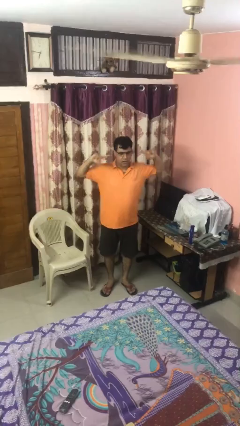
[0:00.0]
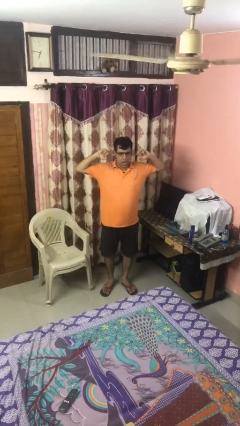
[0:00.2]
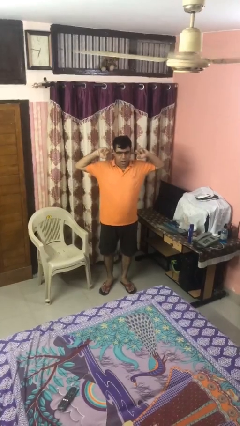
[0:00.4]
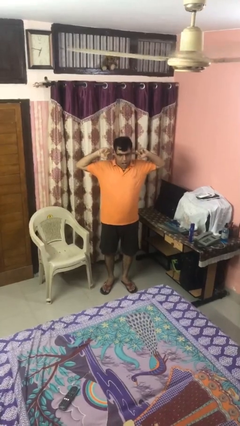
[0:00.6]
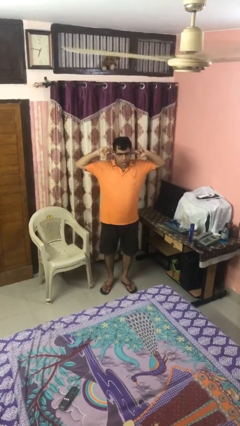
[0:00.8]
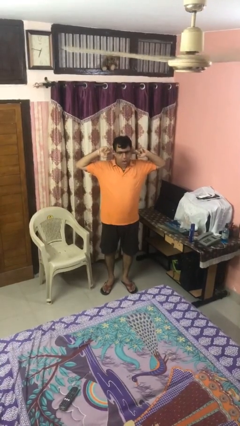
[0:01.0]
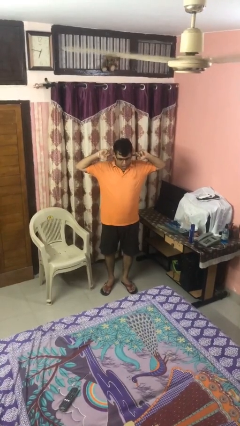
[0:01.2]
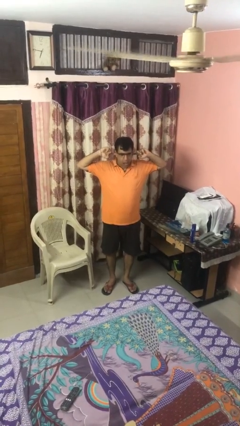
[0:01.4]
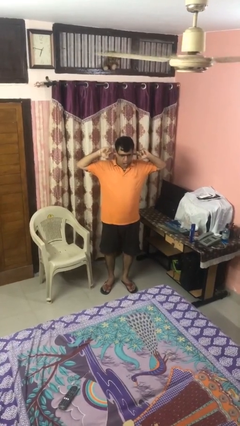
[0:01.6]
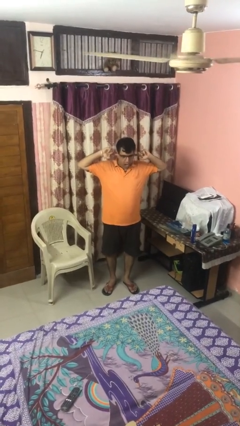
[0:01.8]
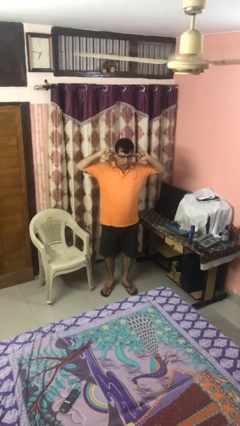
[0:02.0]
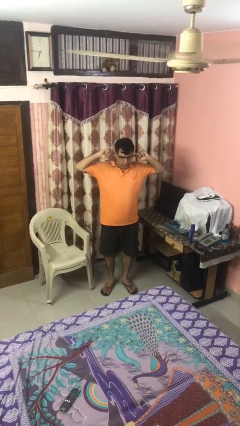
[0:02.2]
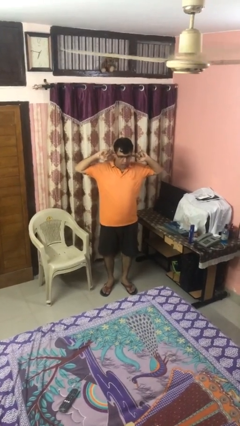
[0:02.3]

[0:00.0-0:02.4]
person puts fingers in ear

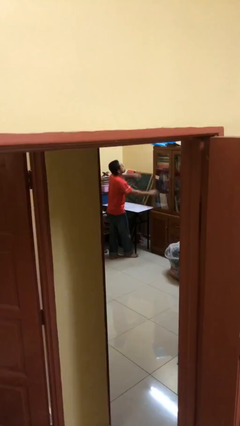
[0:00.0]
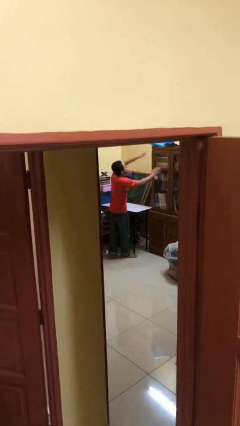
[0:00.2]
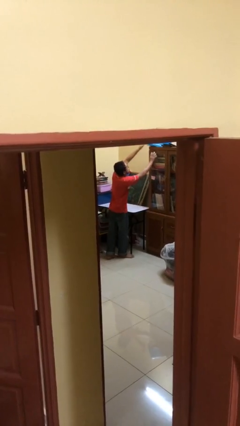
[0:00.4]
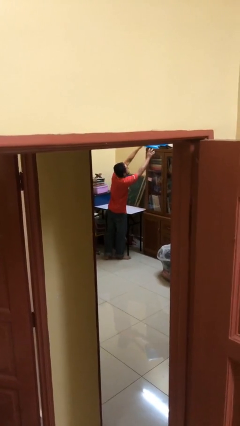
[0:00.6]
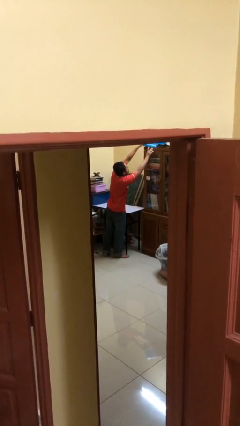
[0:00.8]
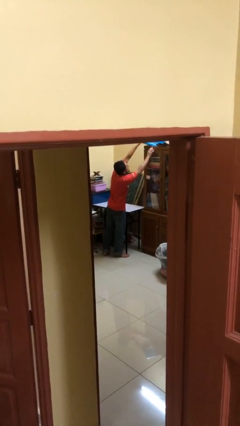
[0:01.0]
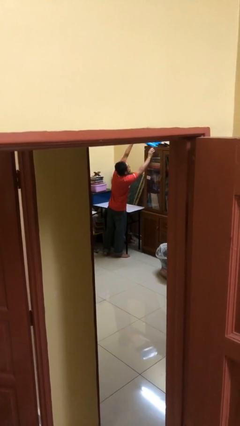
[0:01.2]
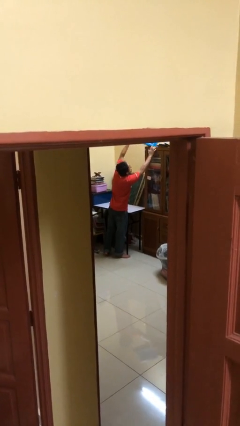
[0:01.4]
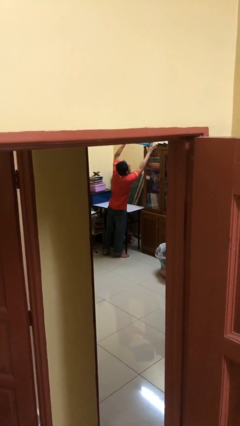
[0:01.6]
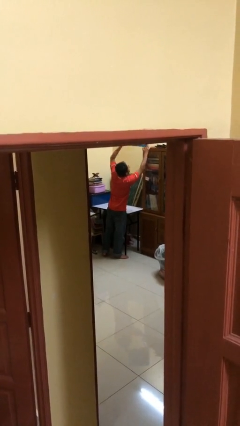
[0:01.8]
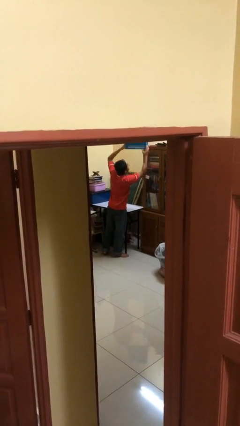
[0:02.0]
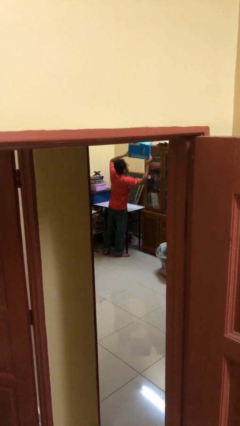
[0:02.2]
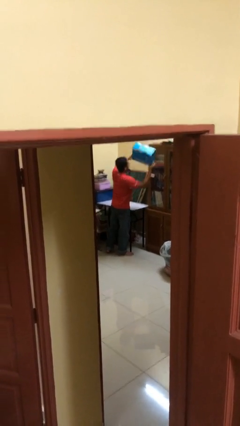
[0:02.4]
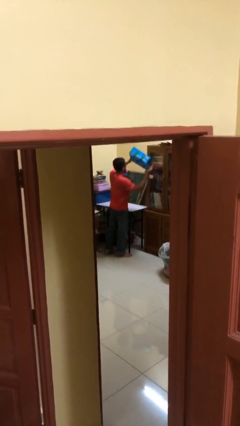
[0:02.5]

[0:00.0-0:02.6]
person picks up object from shelf

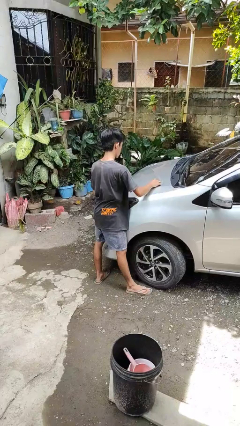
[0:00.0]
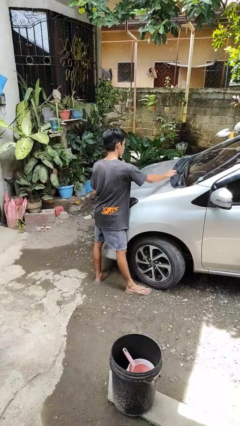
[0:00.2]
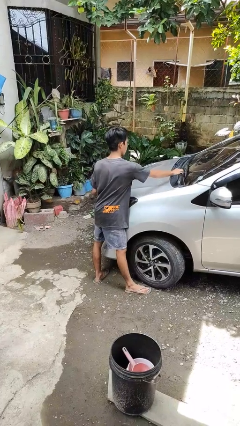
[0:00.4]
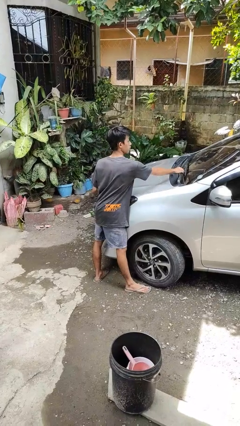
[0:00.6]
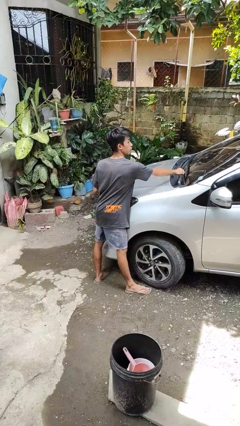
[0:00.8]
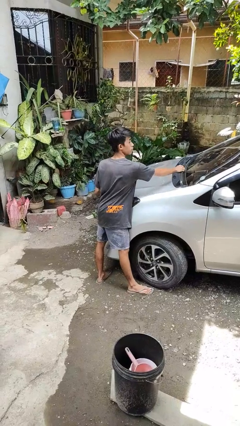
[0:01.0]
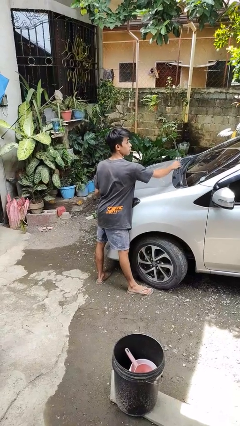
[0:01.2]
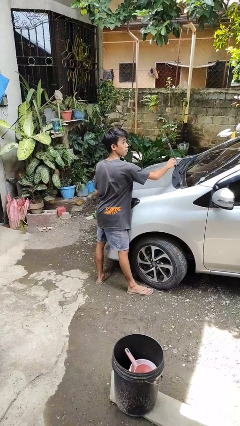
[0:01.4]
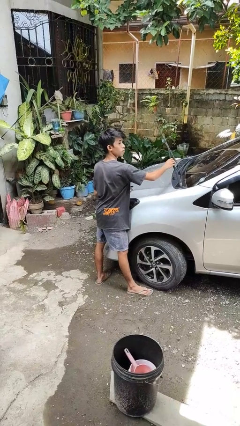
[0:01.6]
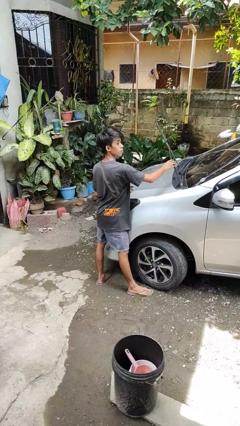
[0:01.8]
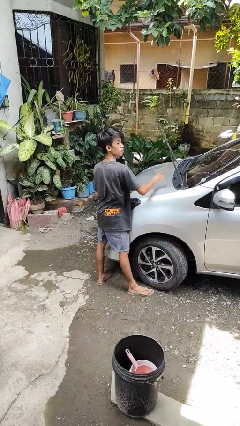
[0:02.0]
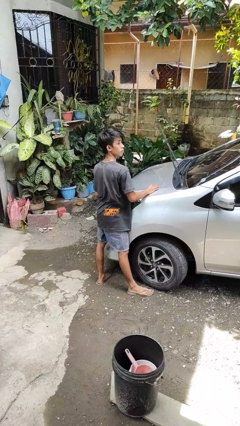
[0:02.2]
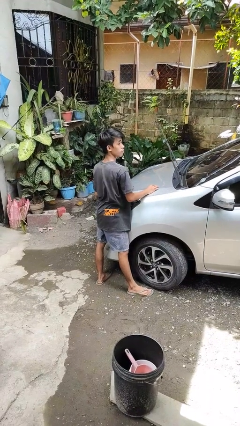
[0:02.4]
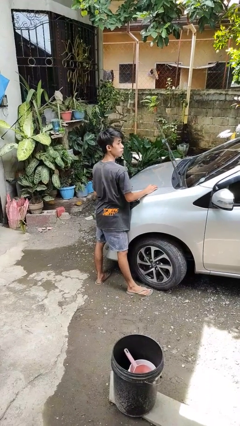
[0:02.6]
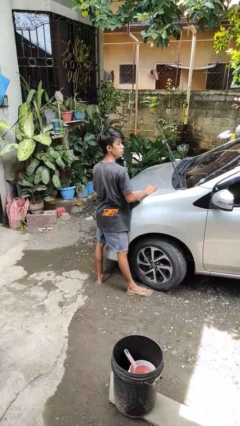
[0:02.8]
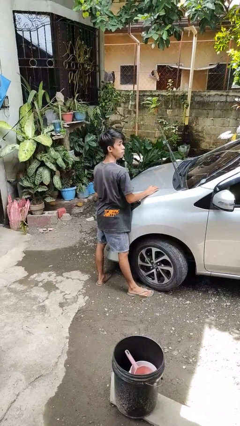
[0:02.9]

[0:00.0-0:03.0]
person flips up car wipers

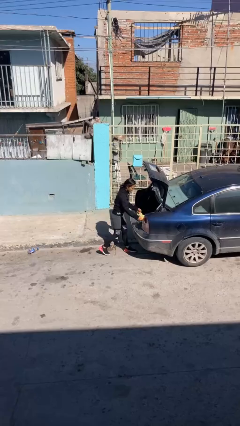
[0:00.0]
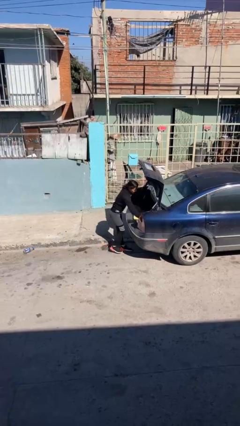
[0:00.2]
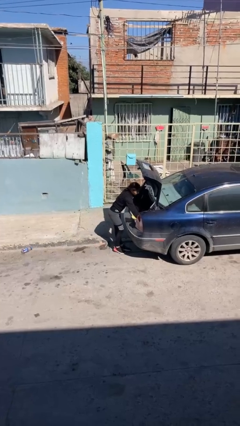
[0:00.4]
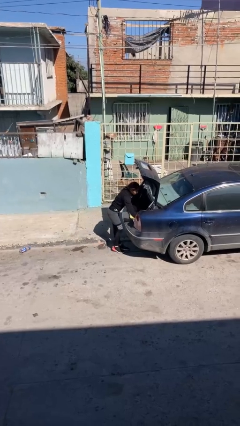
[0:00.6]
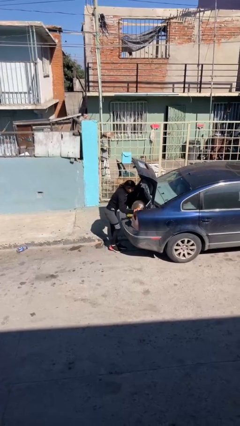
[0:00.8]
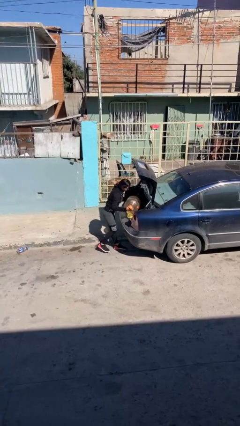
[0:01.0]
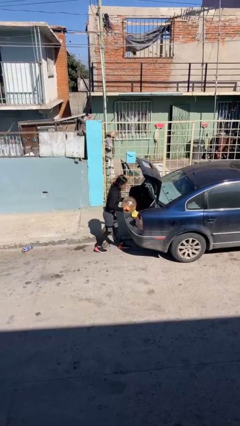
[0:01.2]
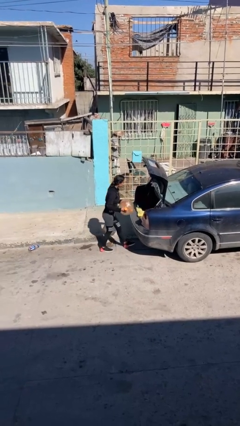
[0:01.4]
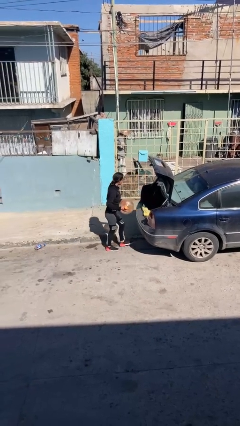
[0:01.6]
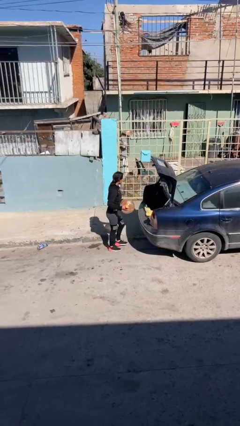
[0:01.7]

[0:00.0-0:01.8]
person unloads car

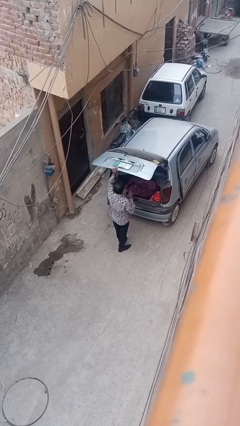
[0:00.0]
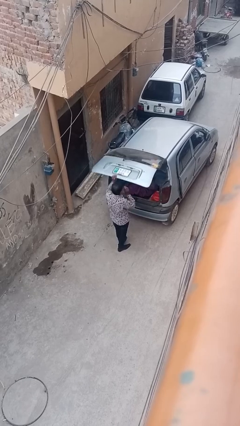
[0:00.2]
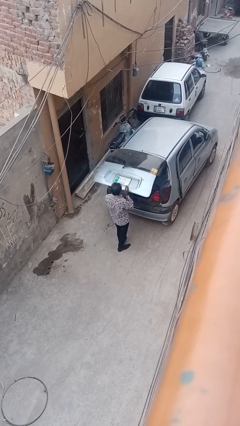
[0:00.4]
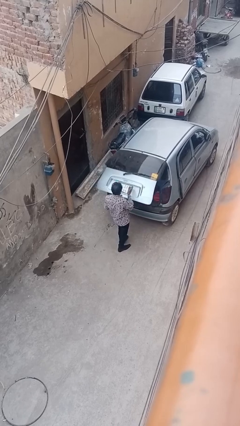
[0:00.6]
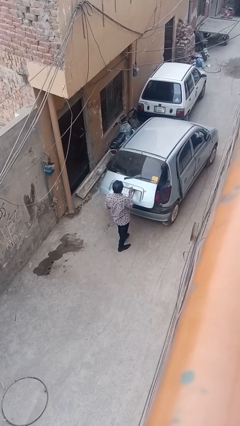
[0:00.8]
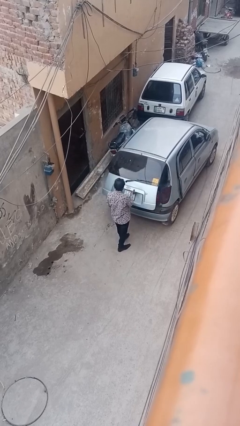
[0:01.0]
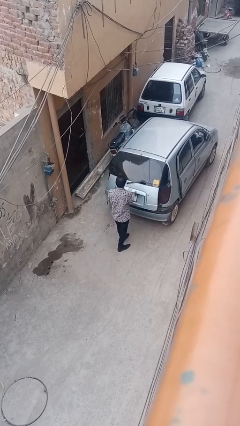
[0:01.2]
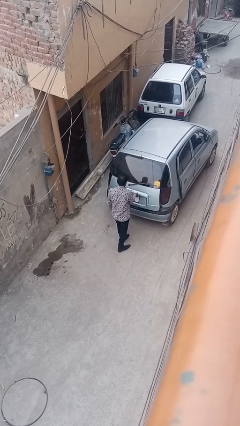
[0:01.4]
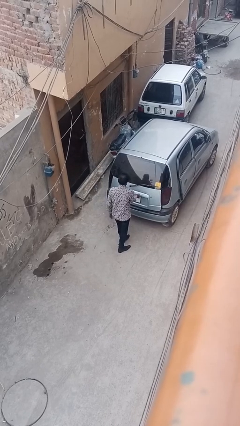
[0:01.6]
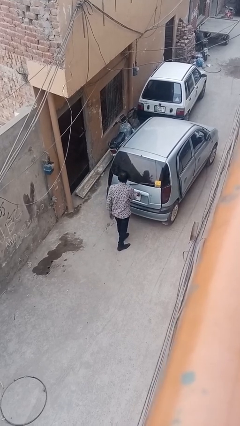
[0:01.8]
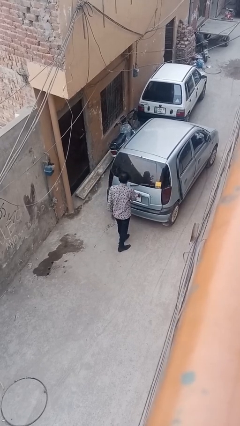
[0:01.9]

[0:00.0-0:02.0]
person closes car trunk

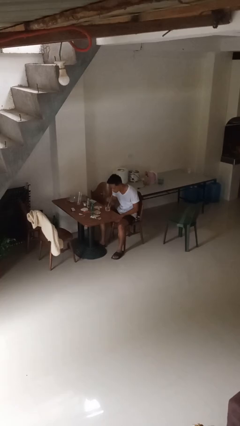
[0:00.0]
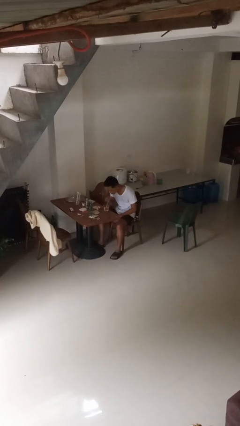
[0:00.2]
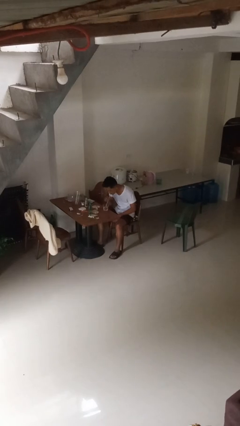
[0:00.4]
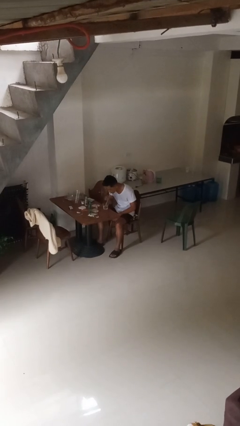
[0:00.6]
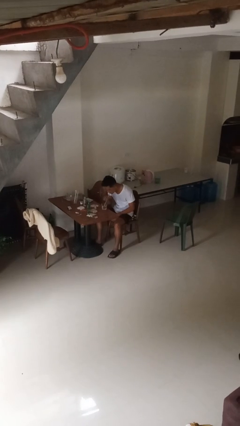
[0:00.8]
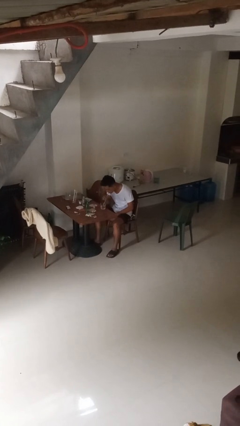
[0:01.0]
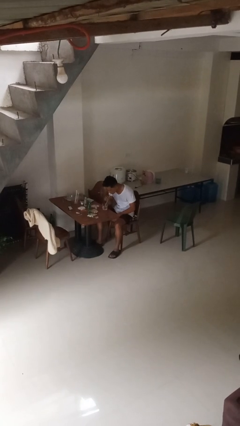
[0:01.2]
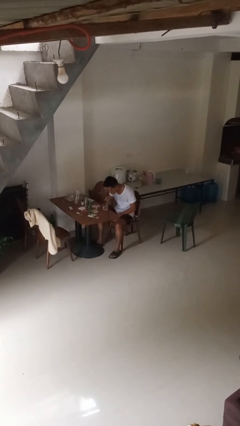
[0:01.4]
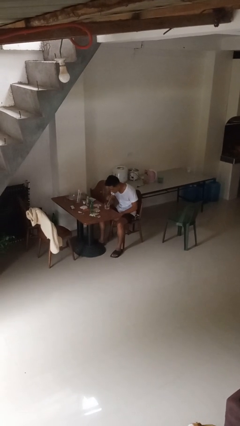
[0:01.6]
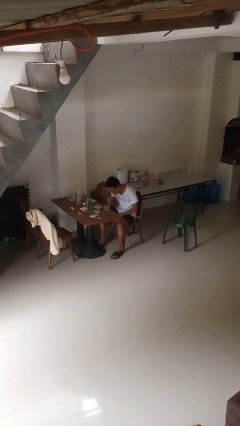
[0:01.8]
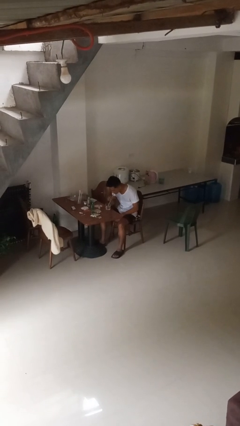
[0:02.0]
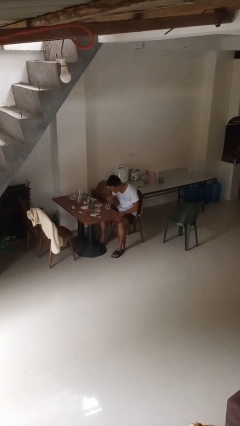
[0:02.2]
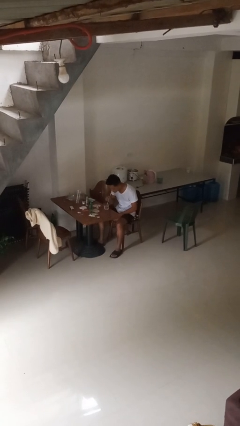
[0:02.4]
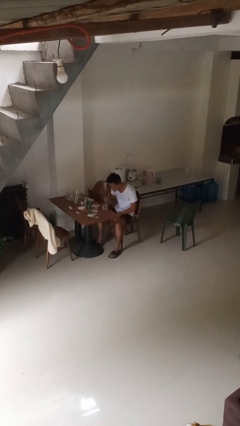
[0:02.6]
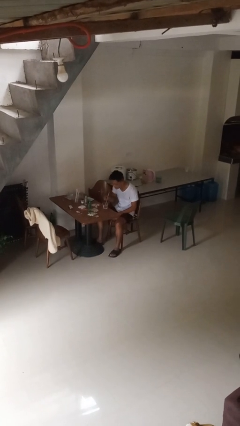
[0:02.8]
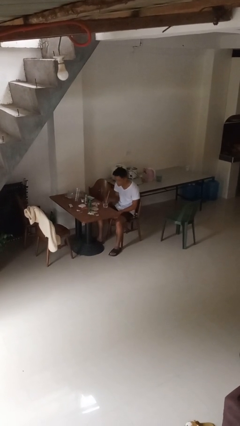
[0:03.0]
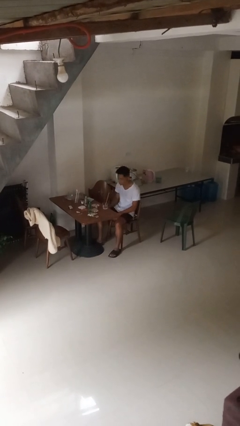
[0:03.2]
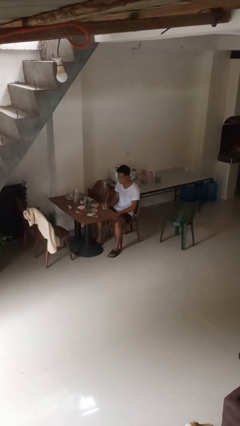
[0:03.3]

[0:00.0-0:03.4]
person drinks from straw

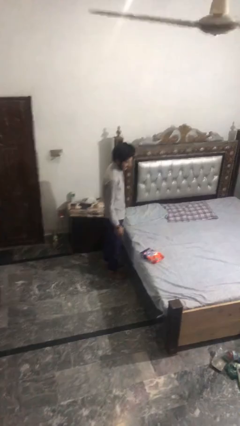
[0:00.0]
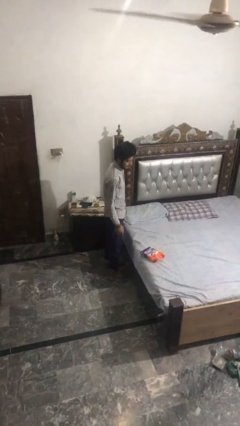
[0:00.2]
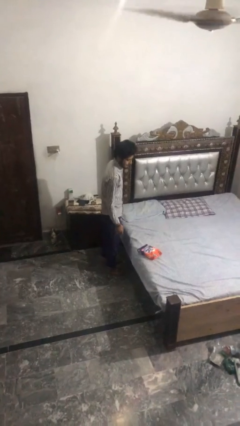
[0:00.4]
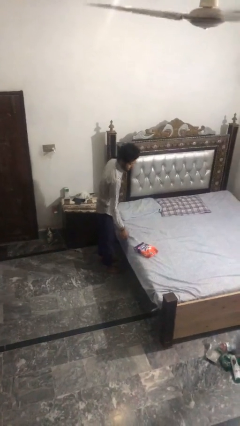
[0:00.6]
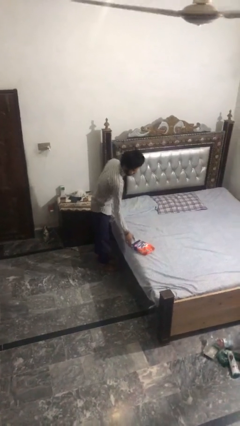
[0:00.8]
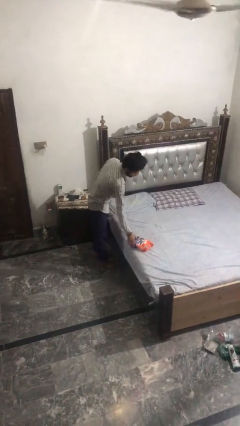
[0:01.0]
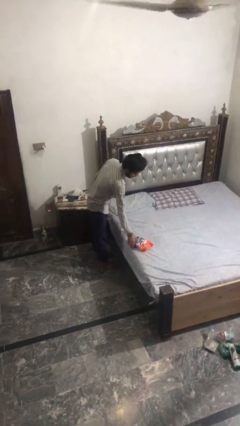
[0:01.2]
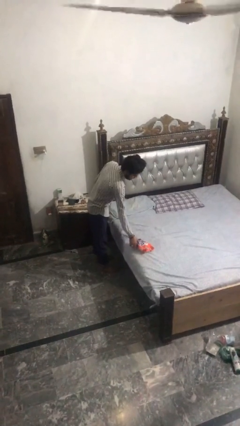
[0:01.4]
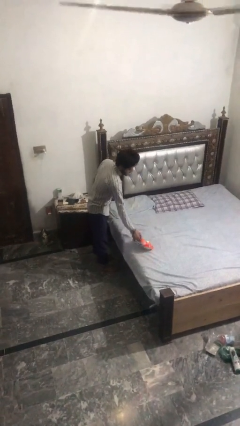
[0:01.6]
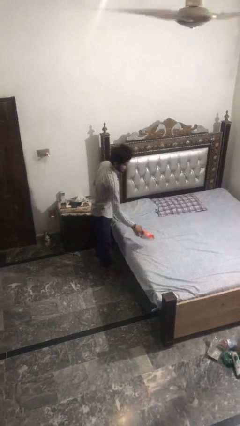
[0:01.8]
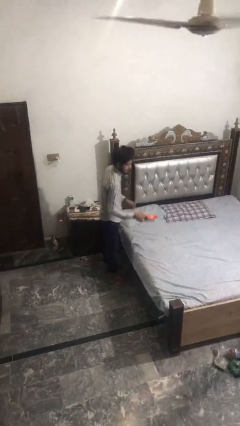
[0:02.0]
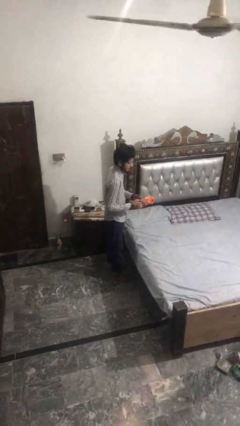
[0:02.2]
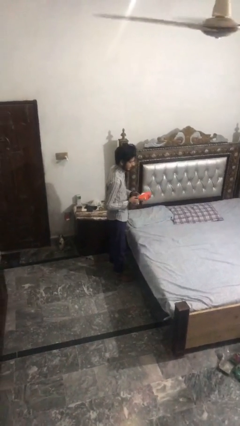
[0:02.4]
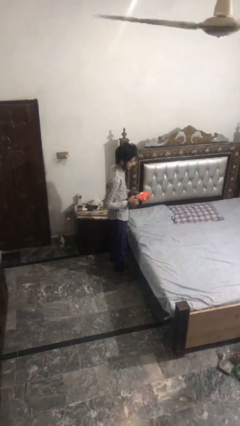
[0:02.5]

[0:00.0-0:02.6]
person picks up object from bed
